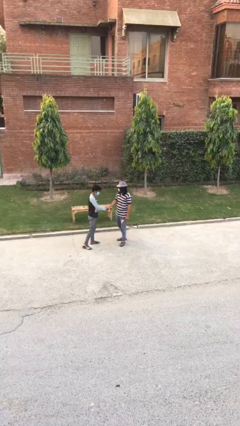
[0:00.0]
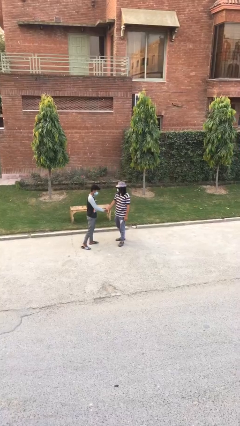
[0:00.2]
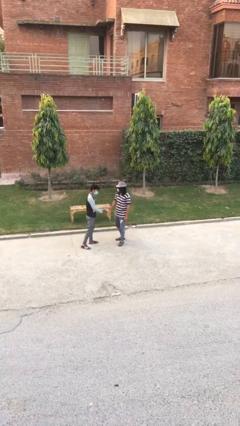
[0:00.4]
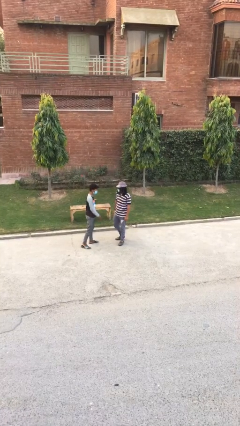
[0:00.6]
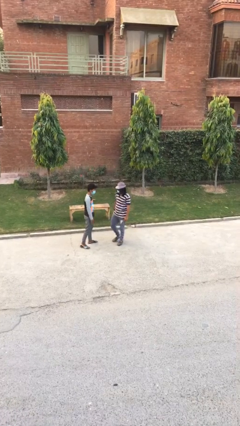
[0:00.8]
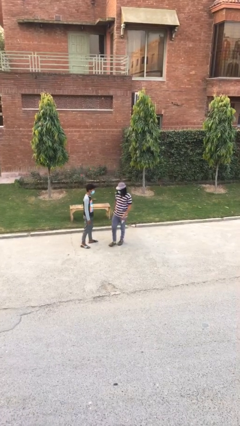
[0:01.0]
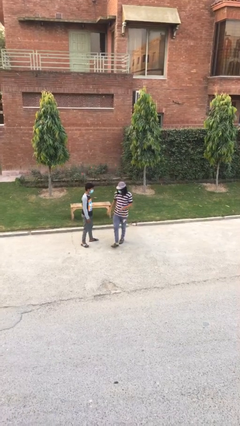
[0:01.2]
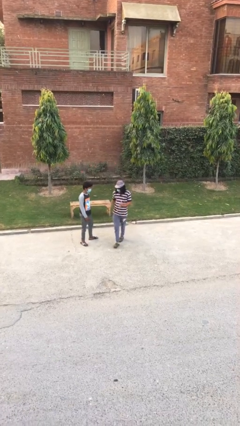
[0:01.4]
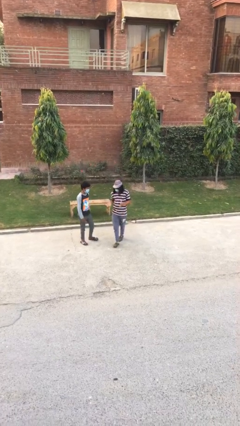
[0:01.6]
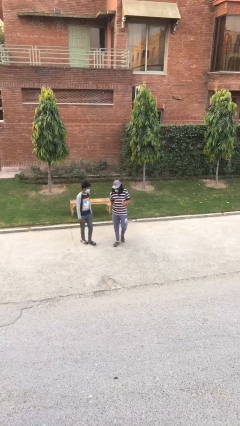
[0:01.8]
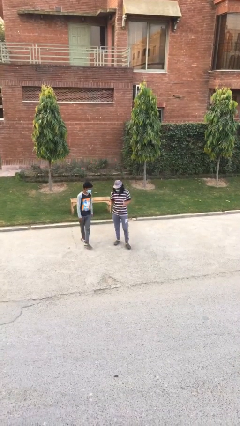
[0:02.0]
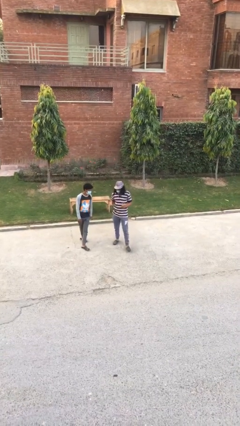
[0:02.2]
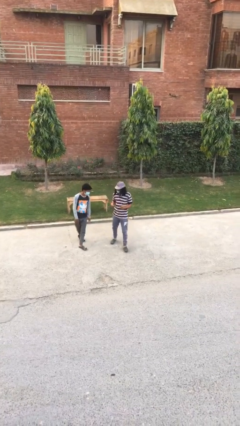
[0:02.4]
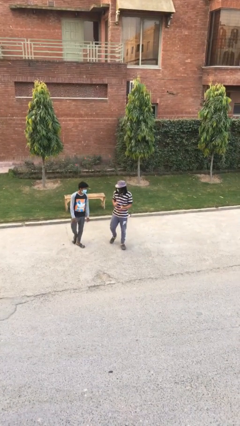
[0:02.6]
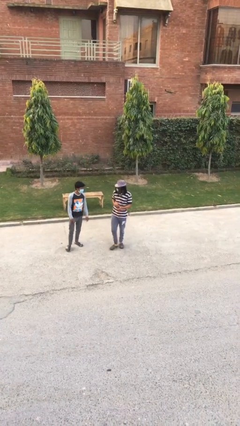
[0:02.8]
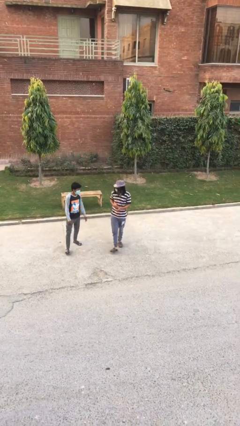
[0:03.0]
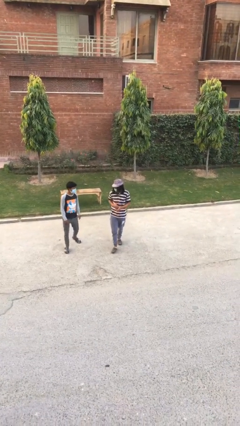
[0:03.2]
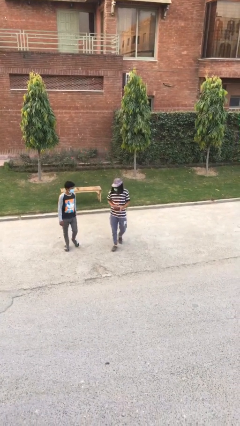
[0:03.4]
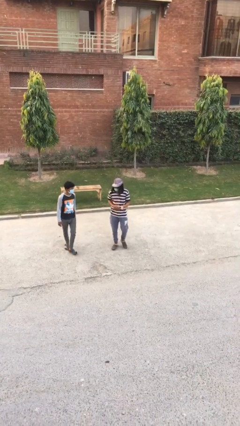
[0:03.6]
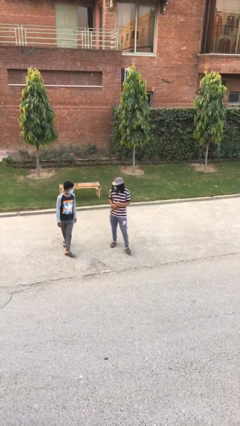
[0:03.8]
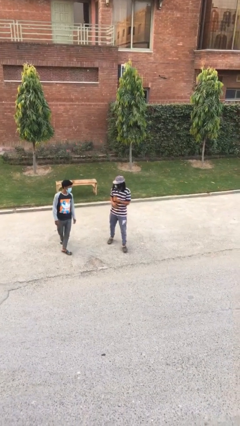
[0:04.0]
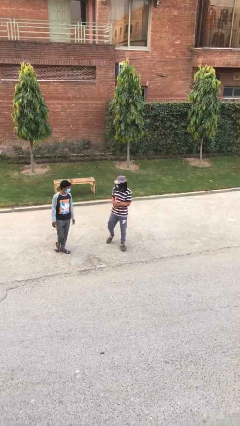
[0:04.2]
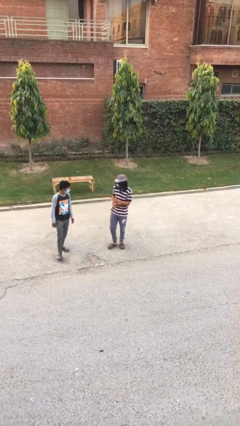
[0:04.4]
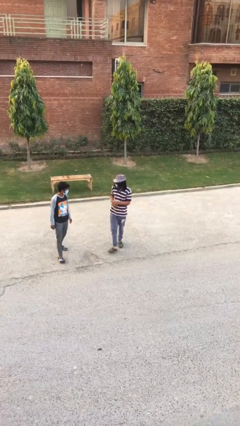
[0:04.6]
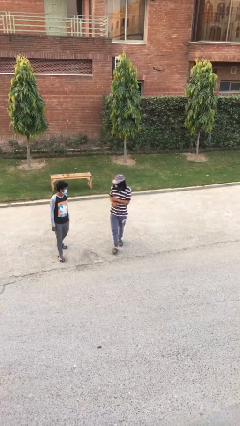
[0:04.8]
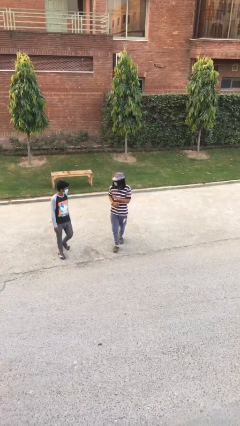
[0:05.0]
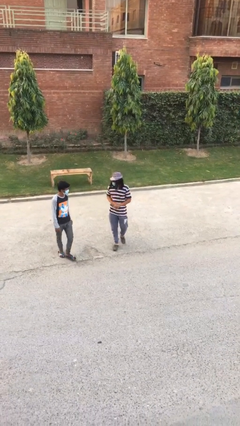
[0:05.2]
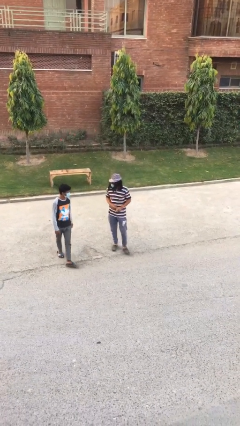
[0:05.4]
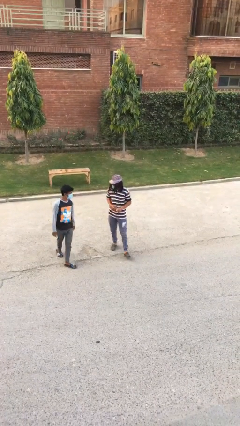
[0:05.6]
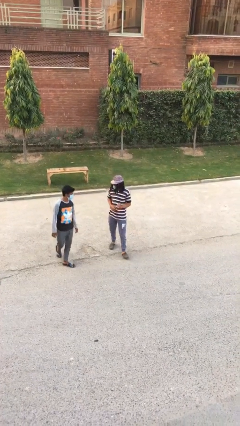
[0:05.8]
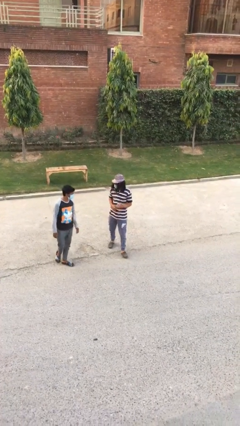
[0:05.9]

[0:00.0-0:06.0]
person talks to person

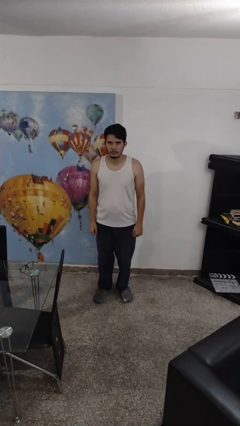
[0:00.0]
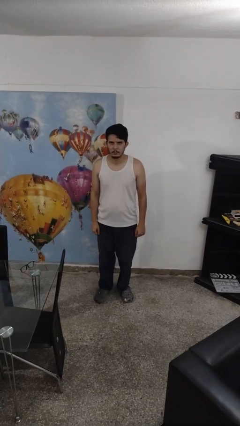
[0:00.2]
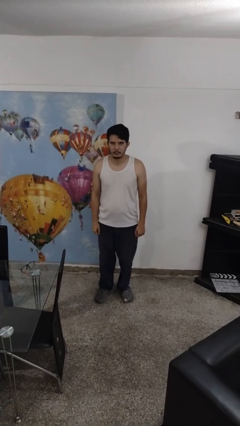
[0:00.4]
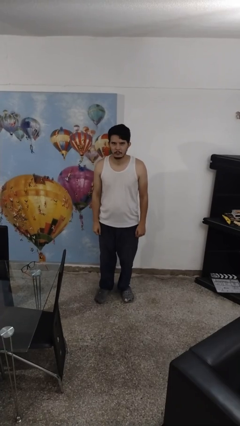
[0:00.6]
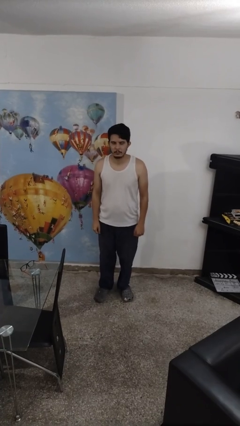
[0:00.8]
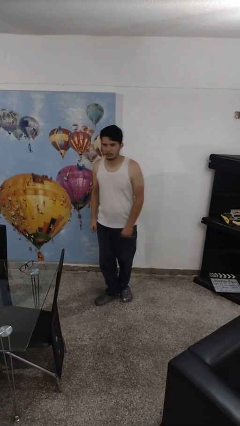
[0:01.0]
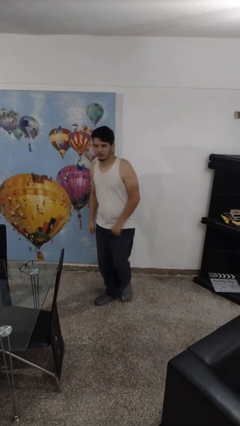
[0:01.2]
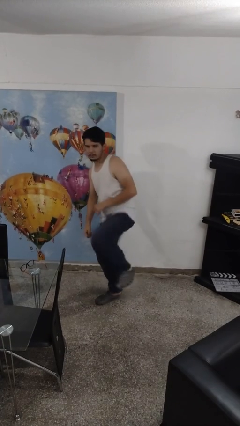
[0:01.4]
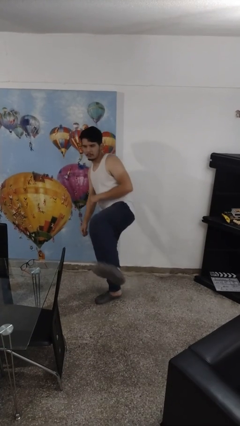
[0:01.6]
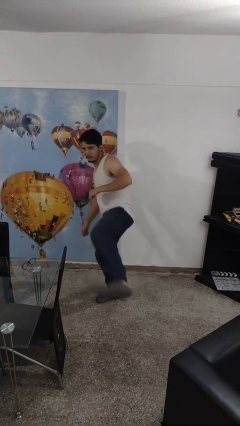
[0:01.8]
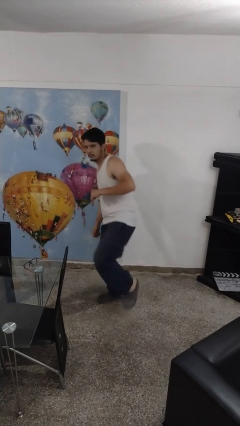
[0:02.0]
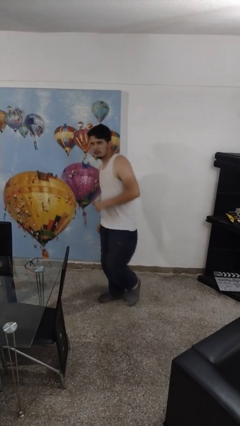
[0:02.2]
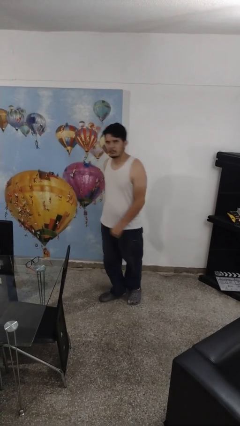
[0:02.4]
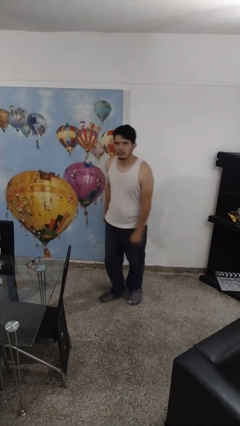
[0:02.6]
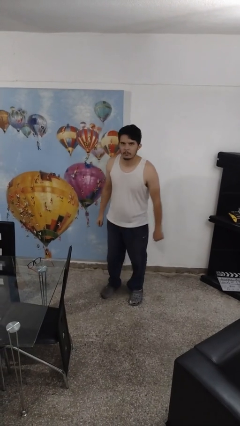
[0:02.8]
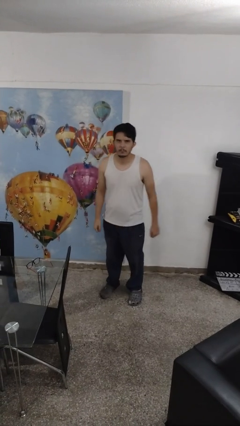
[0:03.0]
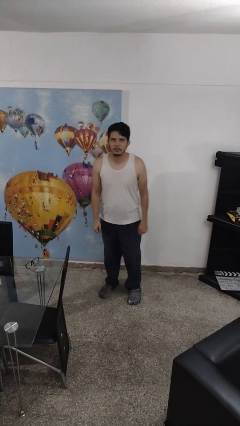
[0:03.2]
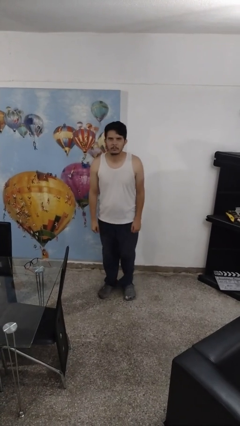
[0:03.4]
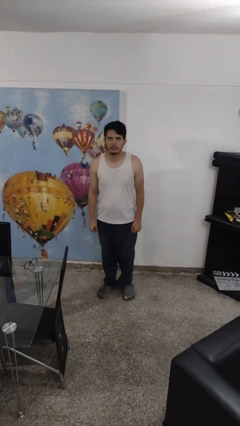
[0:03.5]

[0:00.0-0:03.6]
person karate kicks

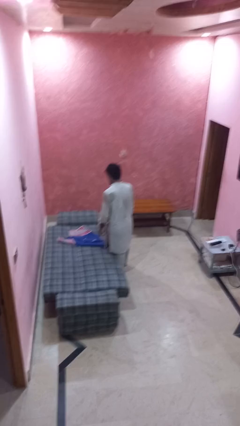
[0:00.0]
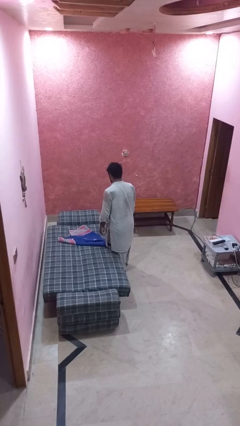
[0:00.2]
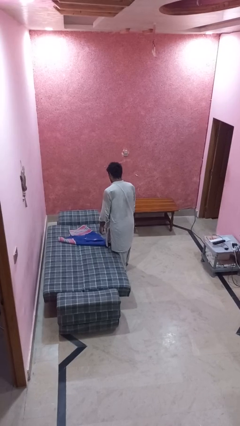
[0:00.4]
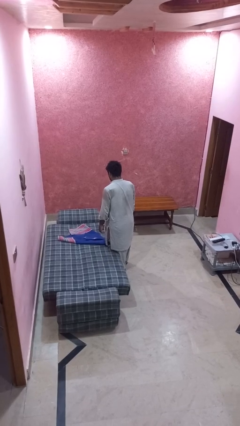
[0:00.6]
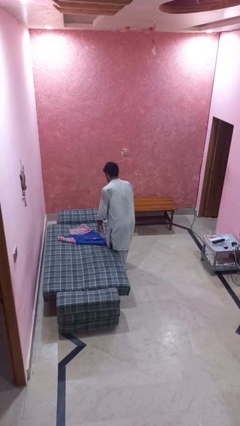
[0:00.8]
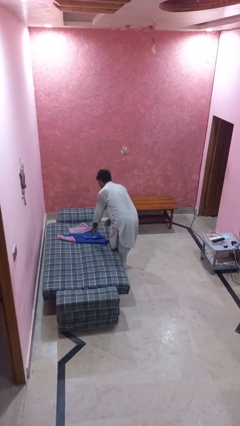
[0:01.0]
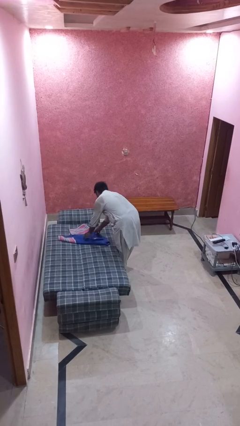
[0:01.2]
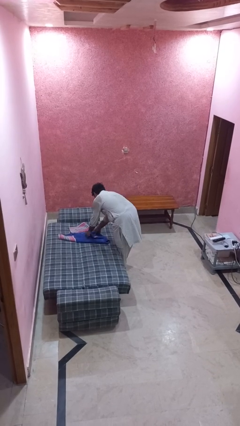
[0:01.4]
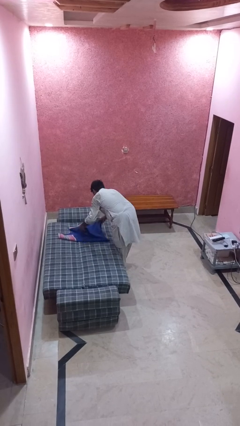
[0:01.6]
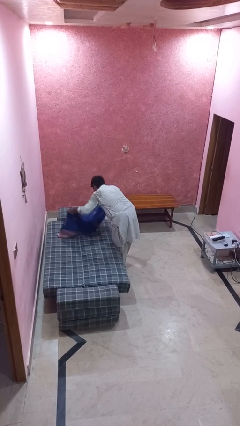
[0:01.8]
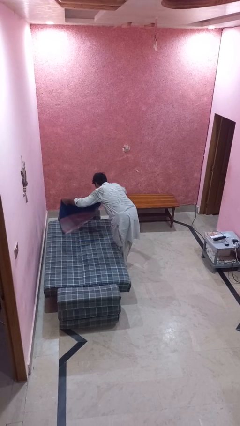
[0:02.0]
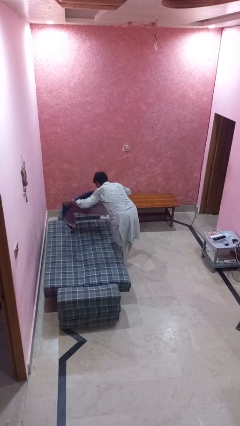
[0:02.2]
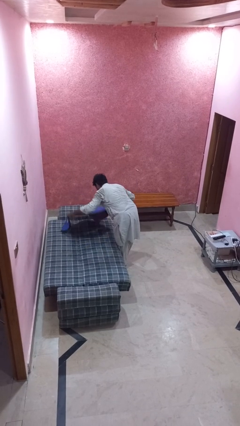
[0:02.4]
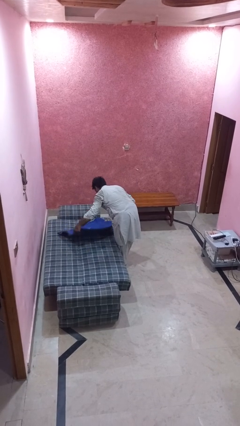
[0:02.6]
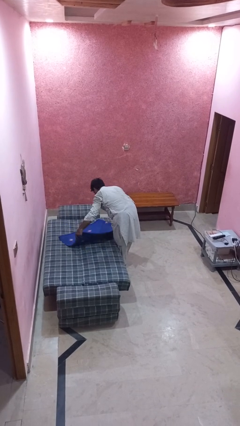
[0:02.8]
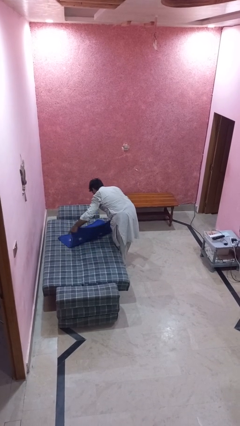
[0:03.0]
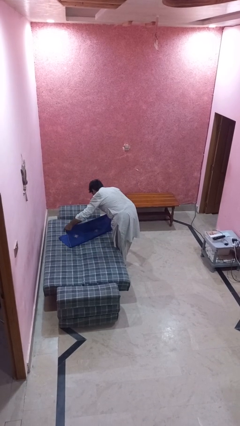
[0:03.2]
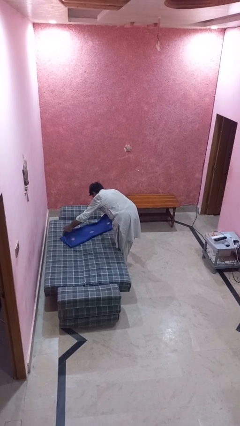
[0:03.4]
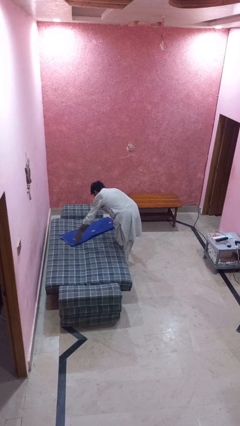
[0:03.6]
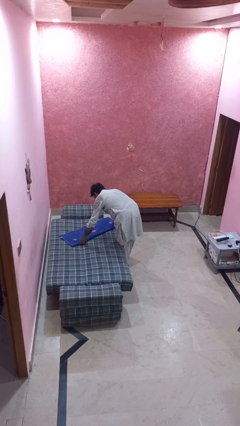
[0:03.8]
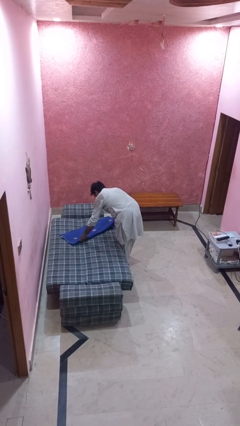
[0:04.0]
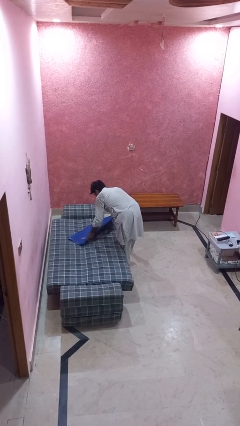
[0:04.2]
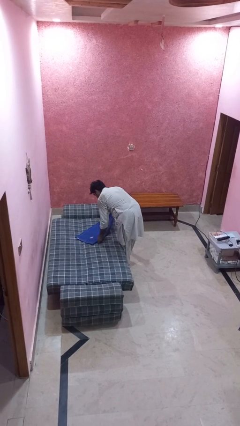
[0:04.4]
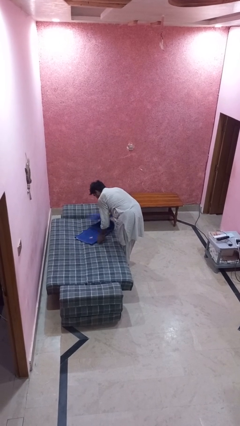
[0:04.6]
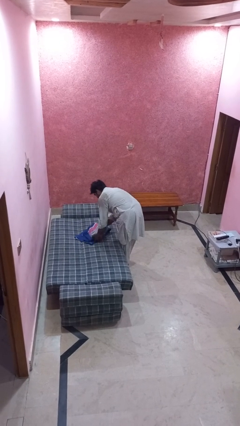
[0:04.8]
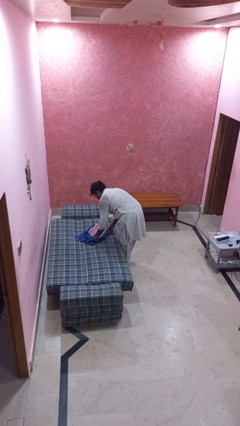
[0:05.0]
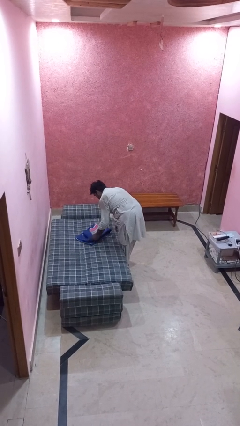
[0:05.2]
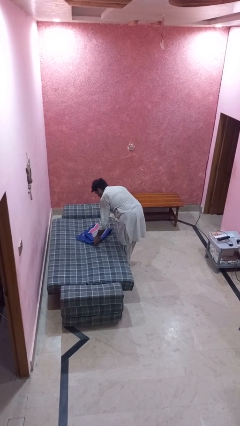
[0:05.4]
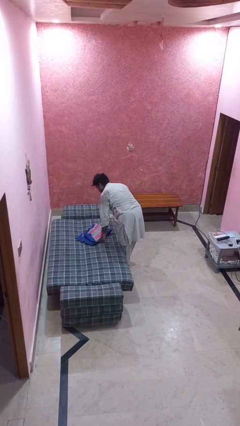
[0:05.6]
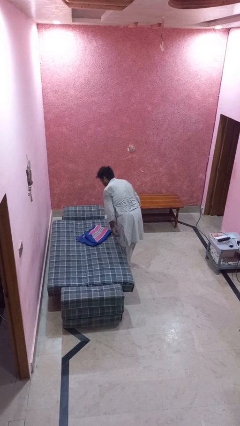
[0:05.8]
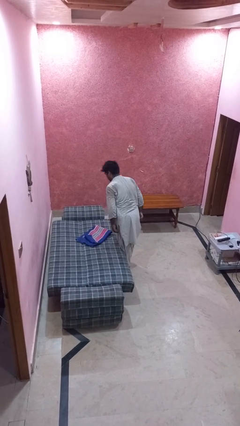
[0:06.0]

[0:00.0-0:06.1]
person folds blanket

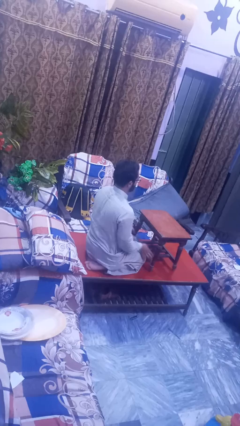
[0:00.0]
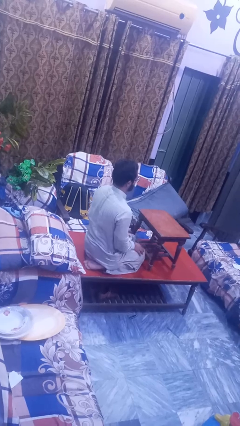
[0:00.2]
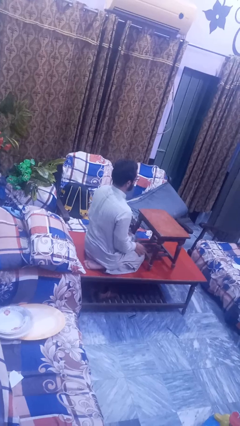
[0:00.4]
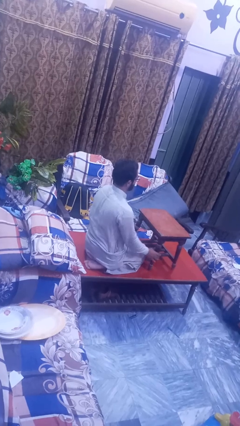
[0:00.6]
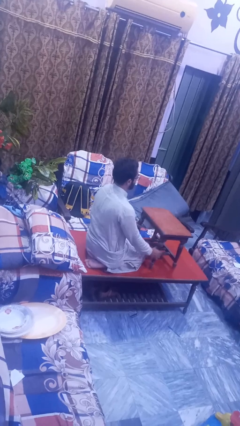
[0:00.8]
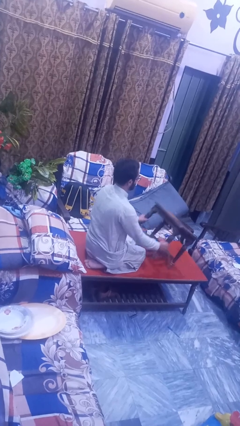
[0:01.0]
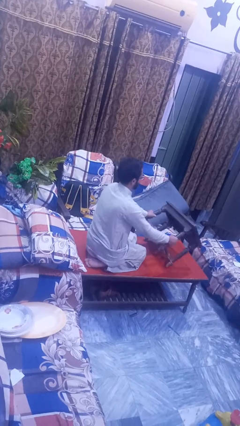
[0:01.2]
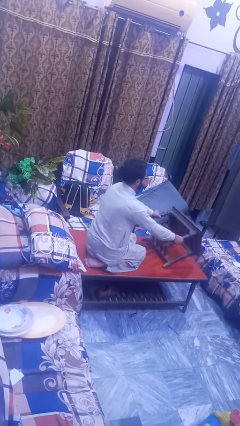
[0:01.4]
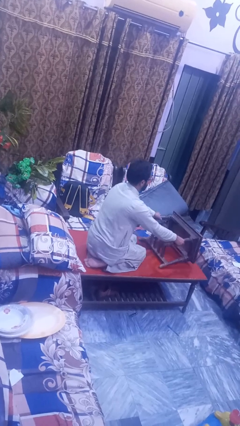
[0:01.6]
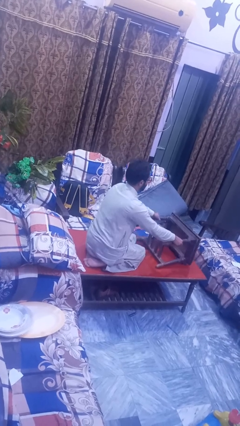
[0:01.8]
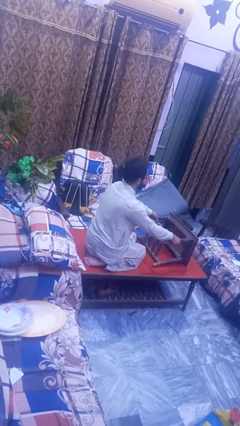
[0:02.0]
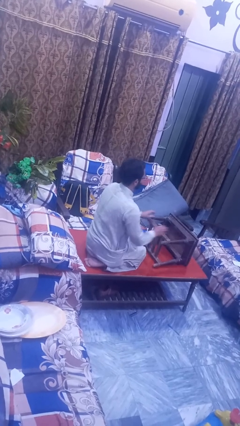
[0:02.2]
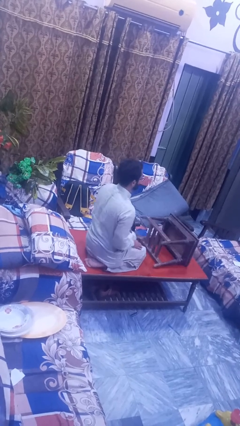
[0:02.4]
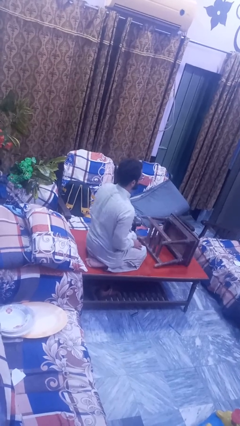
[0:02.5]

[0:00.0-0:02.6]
person knocks over furniture
